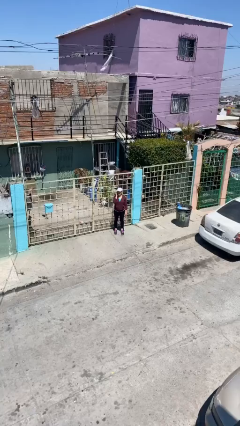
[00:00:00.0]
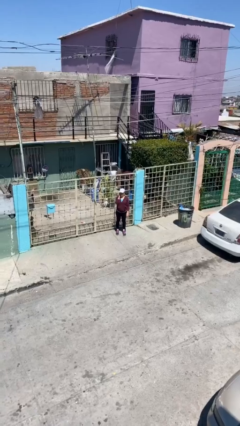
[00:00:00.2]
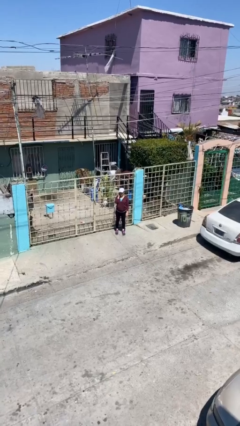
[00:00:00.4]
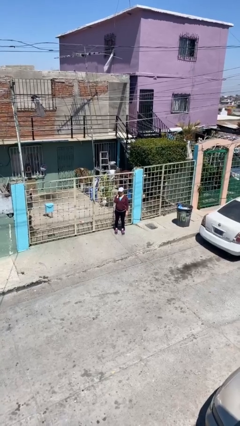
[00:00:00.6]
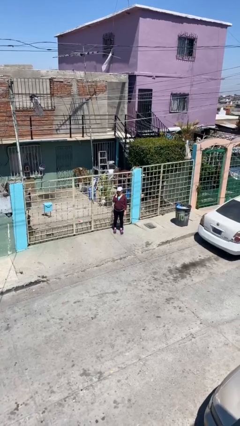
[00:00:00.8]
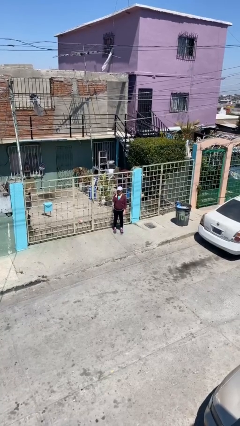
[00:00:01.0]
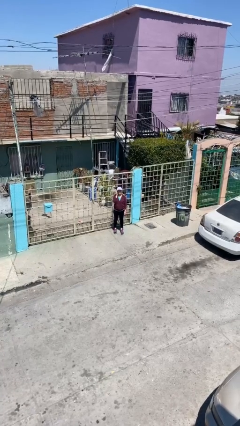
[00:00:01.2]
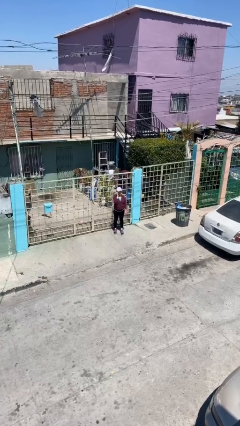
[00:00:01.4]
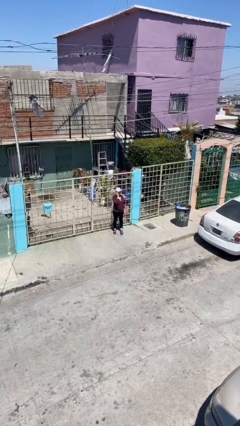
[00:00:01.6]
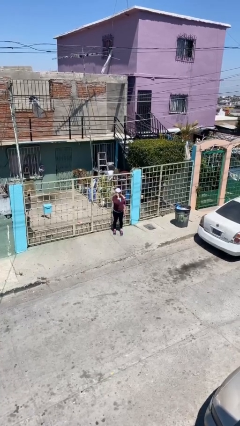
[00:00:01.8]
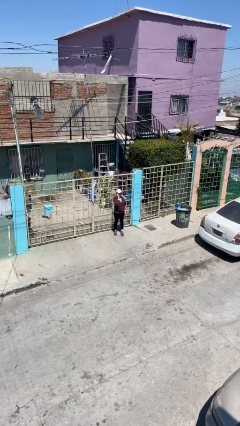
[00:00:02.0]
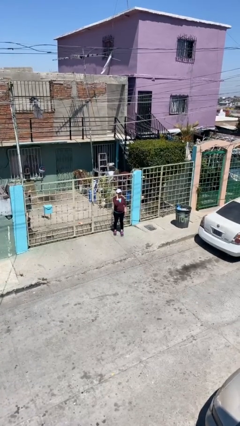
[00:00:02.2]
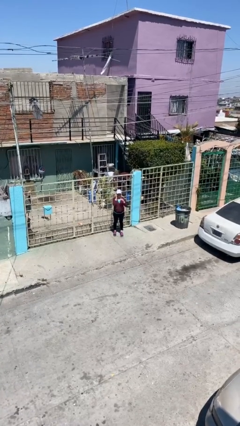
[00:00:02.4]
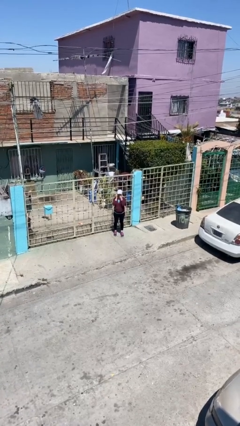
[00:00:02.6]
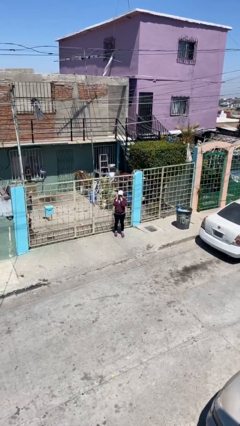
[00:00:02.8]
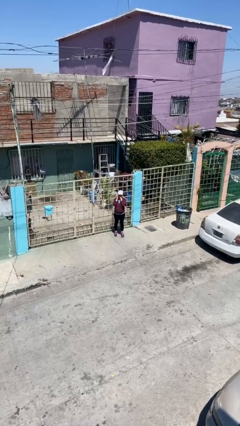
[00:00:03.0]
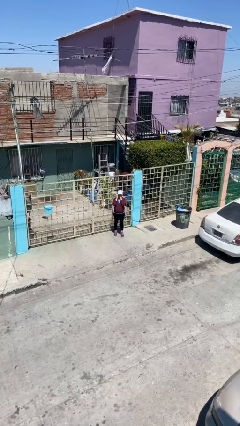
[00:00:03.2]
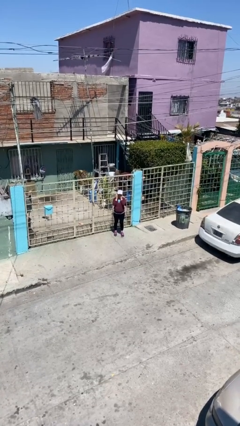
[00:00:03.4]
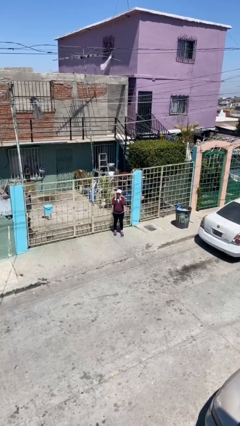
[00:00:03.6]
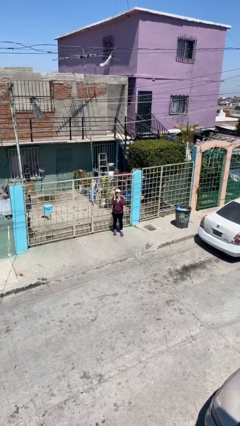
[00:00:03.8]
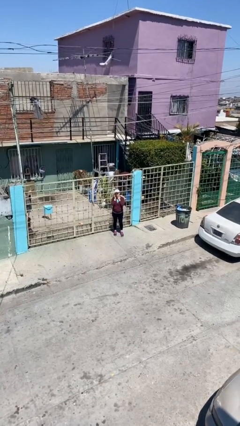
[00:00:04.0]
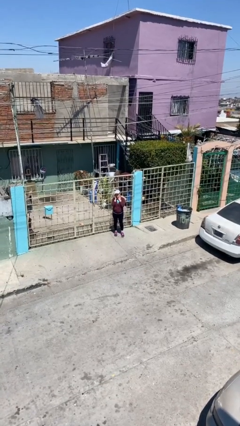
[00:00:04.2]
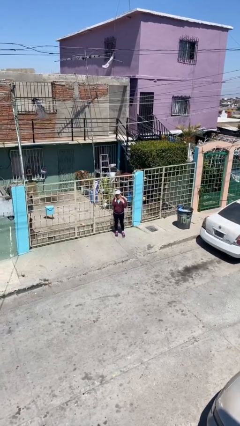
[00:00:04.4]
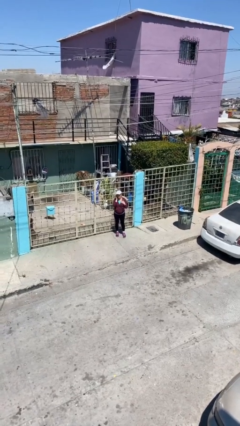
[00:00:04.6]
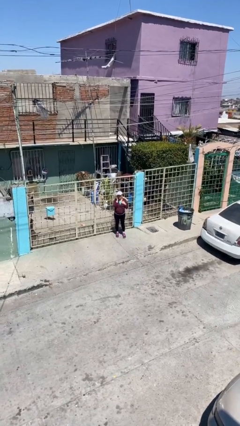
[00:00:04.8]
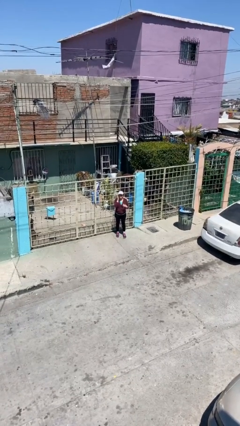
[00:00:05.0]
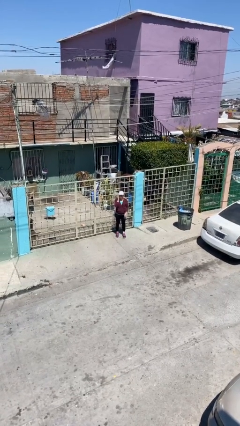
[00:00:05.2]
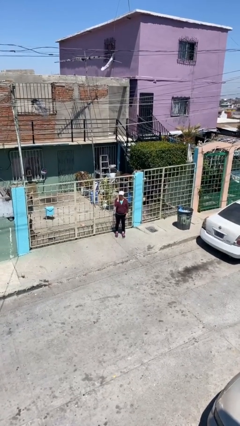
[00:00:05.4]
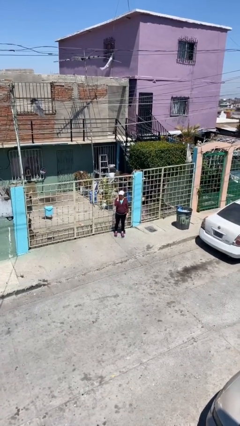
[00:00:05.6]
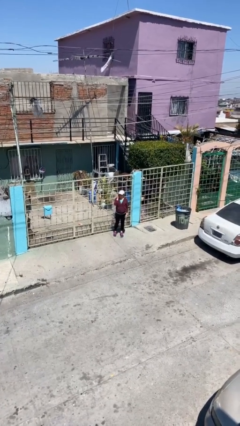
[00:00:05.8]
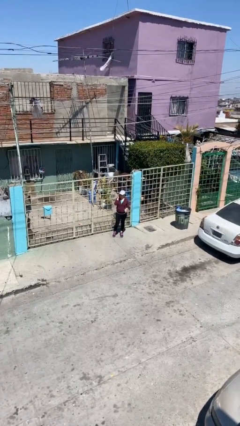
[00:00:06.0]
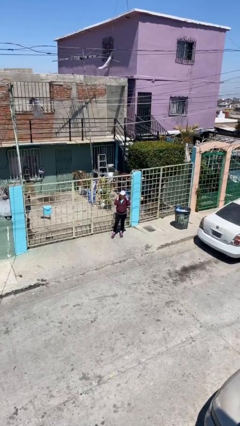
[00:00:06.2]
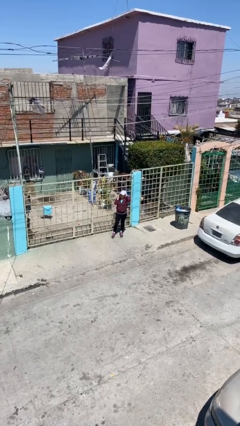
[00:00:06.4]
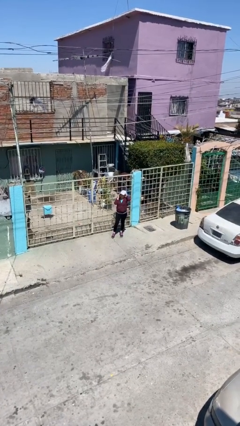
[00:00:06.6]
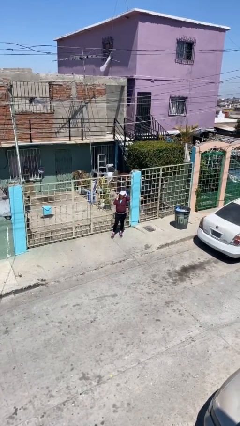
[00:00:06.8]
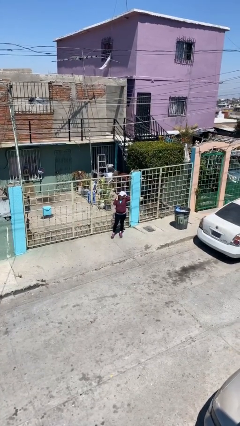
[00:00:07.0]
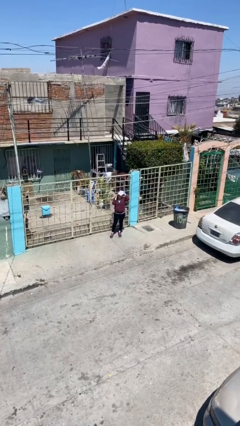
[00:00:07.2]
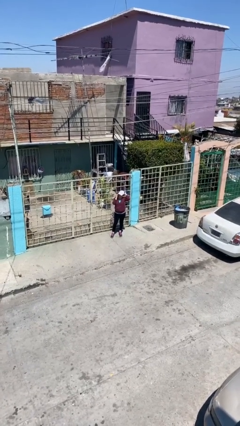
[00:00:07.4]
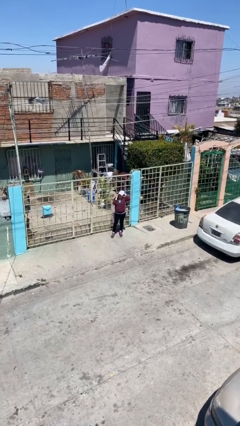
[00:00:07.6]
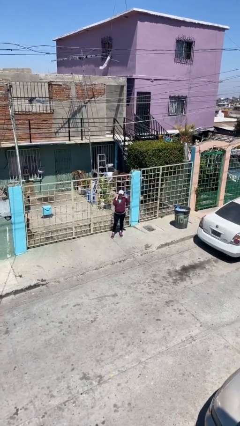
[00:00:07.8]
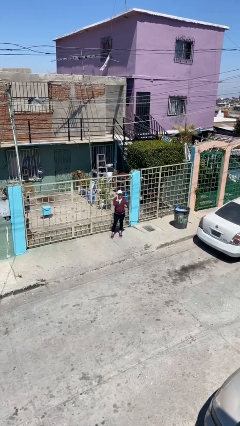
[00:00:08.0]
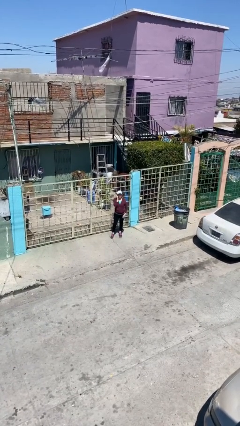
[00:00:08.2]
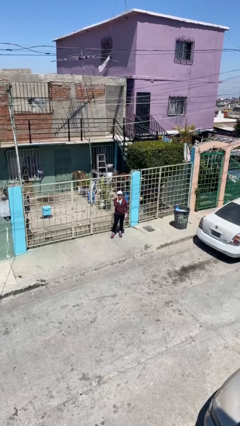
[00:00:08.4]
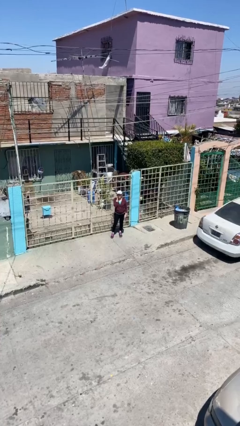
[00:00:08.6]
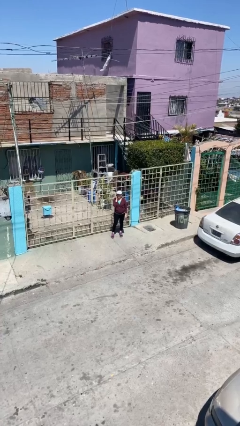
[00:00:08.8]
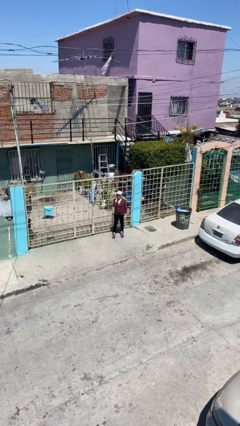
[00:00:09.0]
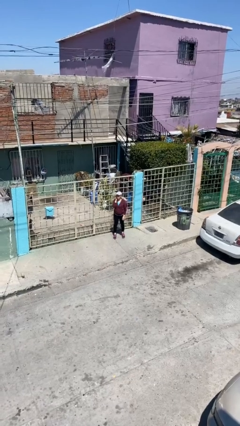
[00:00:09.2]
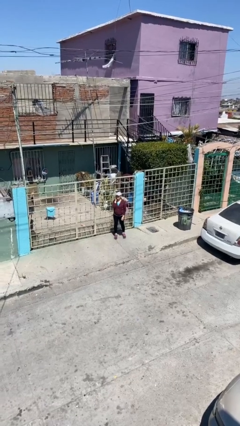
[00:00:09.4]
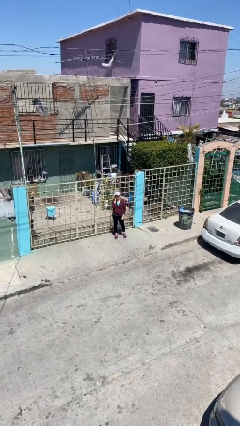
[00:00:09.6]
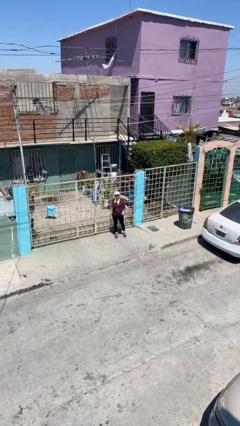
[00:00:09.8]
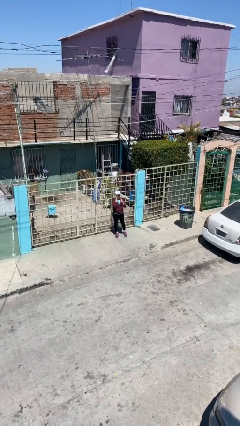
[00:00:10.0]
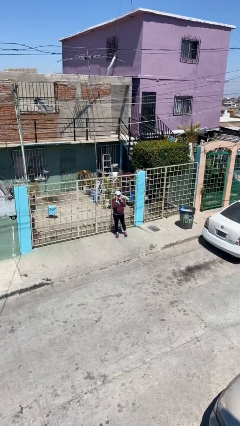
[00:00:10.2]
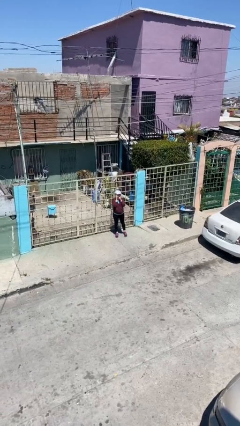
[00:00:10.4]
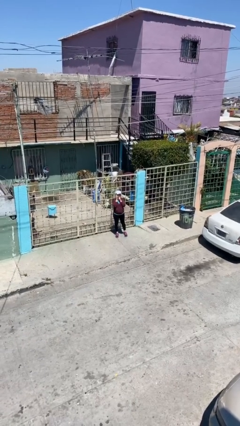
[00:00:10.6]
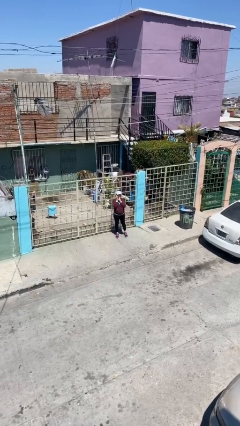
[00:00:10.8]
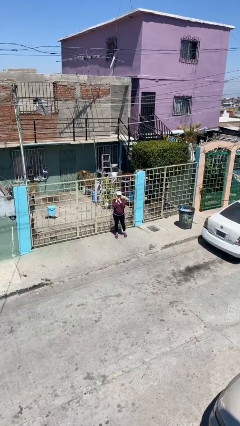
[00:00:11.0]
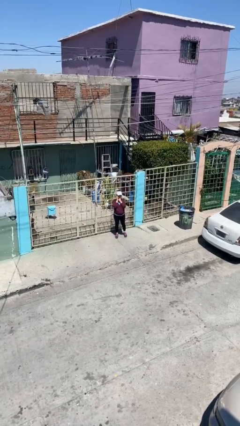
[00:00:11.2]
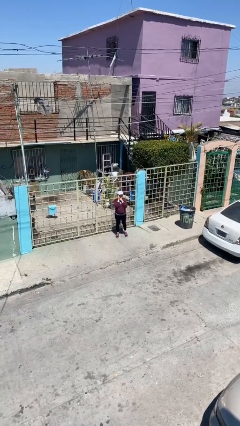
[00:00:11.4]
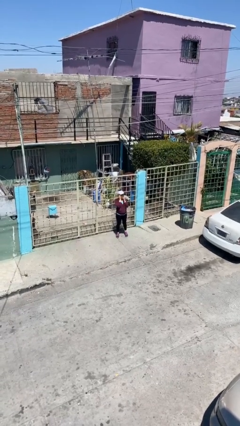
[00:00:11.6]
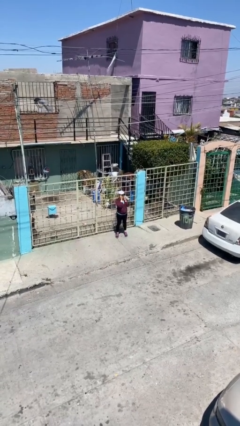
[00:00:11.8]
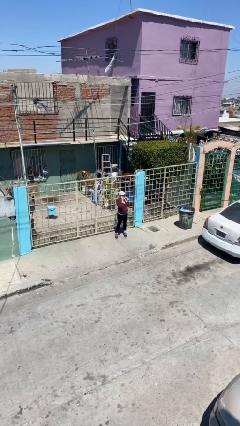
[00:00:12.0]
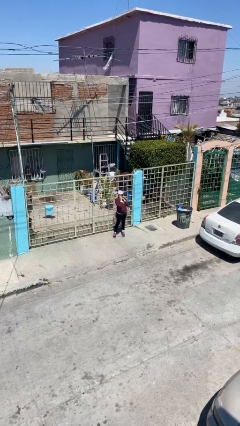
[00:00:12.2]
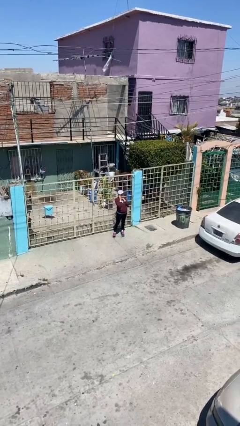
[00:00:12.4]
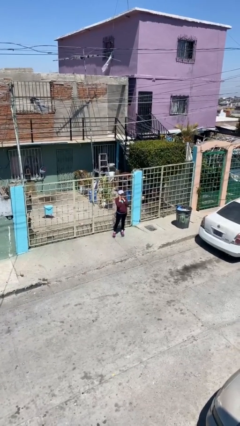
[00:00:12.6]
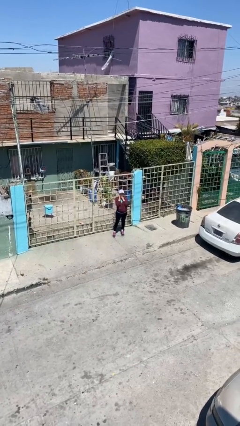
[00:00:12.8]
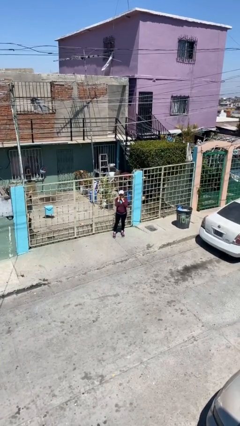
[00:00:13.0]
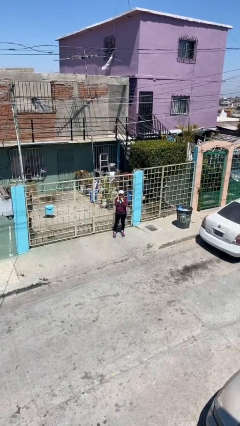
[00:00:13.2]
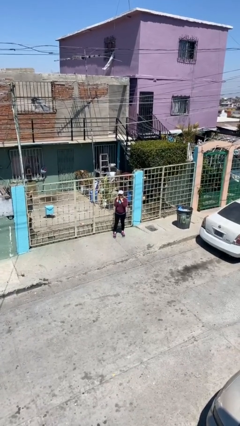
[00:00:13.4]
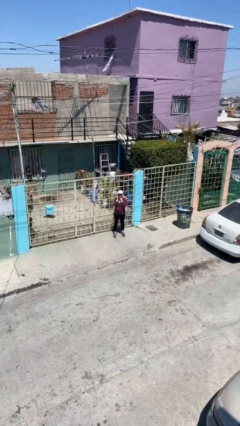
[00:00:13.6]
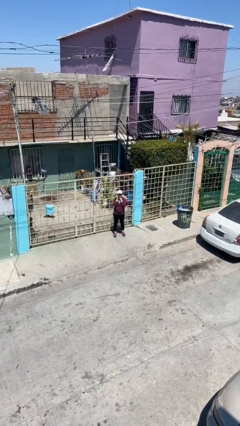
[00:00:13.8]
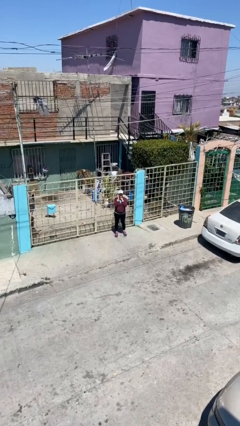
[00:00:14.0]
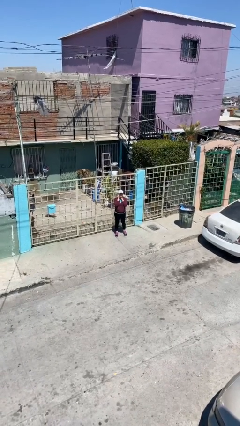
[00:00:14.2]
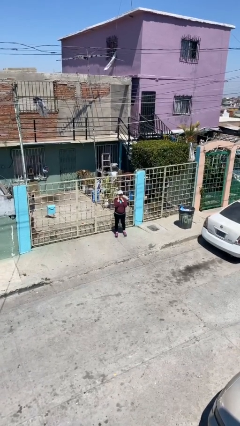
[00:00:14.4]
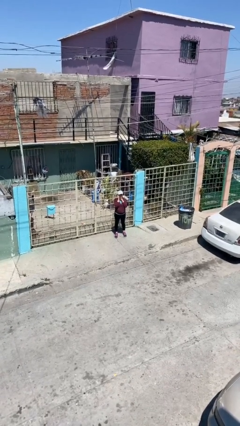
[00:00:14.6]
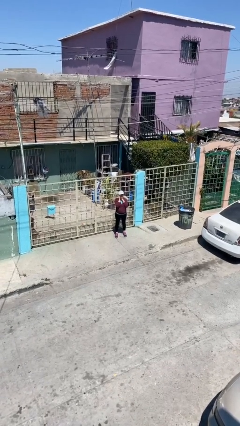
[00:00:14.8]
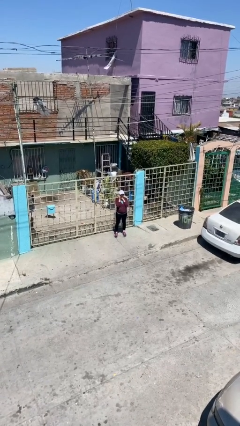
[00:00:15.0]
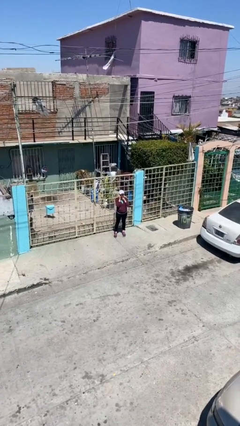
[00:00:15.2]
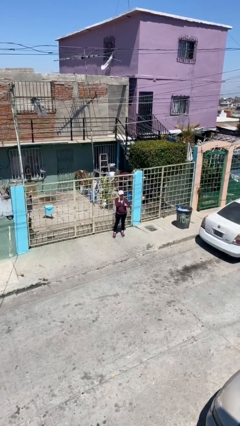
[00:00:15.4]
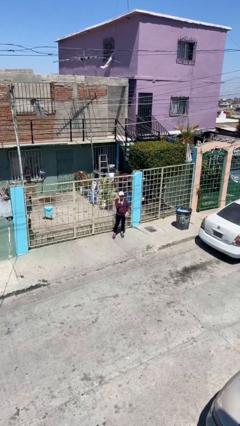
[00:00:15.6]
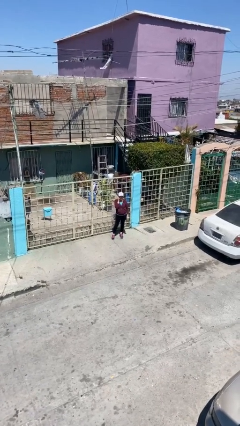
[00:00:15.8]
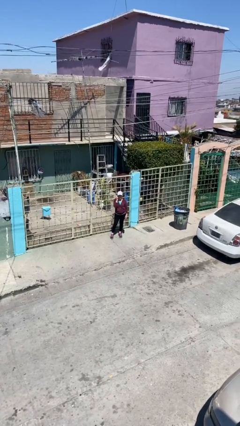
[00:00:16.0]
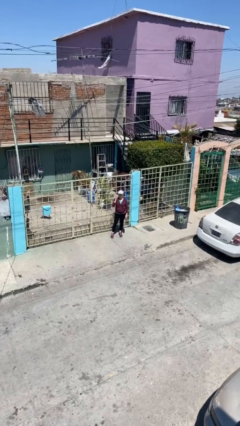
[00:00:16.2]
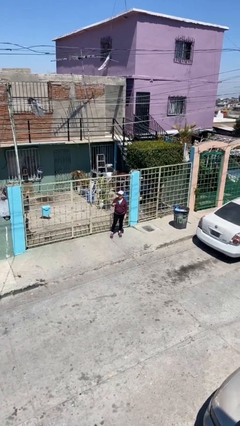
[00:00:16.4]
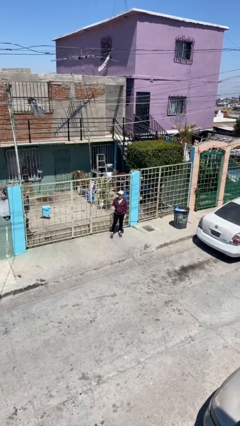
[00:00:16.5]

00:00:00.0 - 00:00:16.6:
person talks on phone

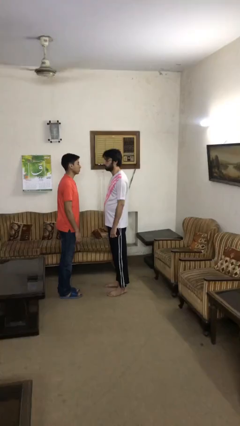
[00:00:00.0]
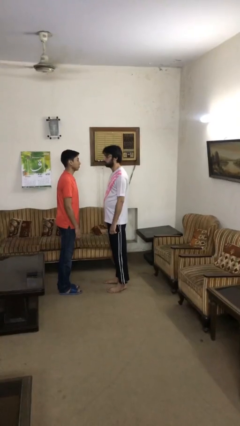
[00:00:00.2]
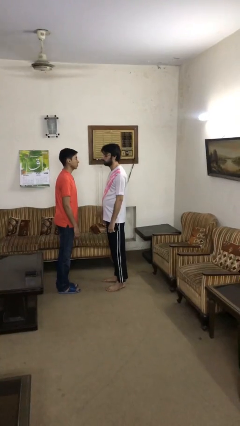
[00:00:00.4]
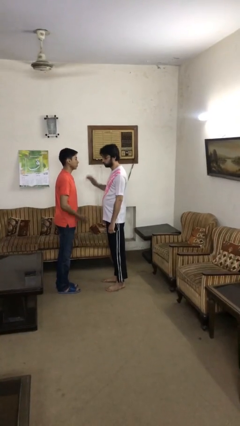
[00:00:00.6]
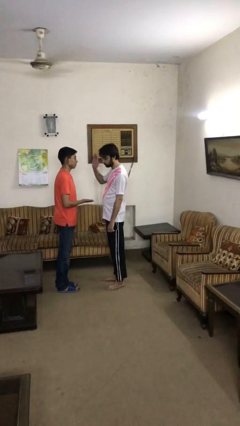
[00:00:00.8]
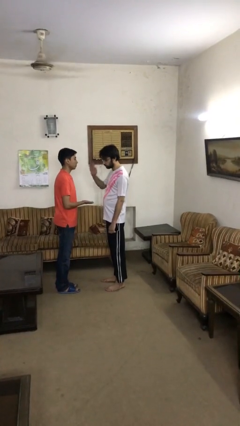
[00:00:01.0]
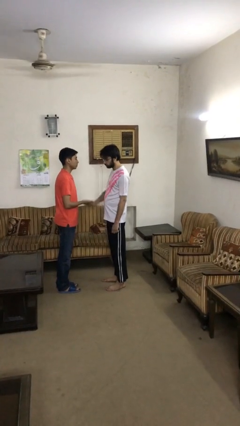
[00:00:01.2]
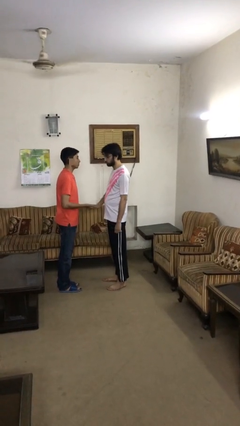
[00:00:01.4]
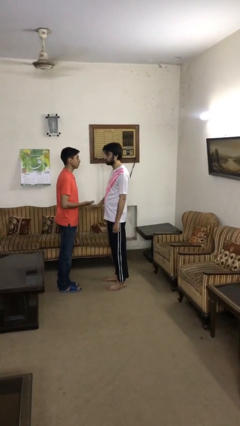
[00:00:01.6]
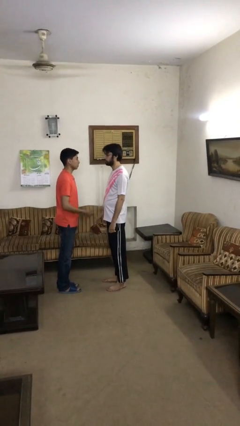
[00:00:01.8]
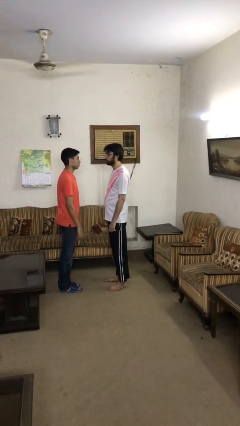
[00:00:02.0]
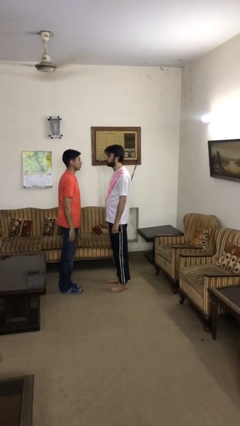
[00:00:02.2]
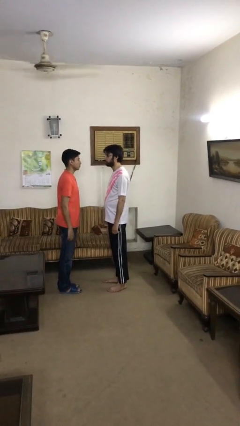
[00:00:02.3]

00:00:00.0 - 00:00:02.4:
person highfives hand
